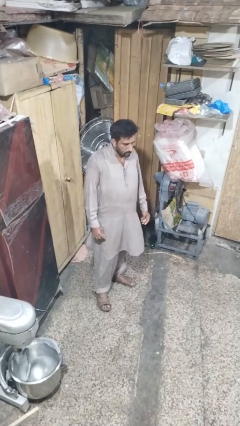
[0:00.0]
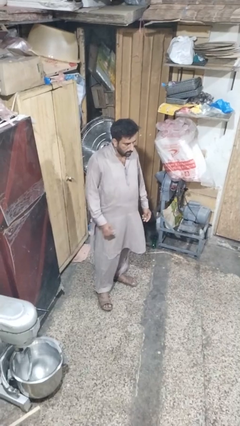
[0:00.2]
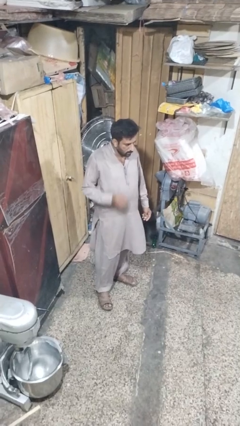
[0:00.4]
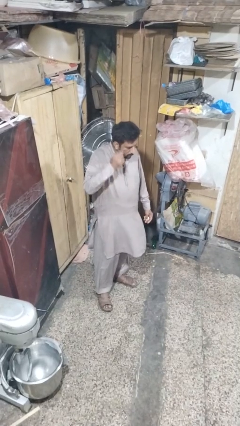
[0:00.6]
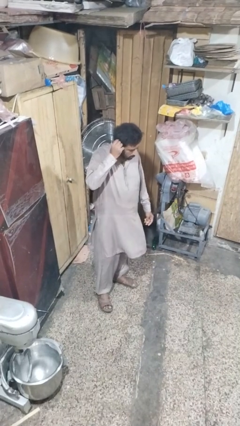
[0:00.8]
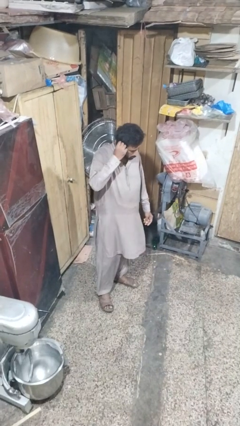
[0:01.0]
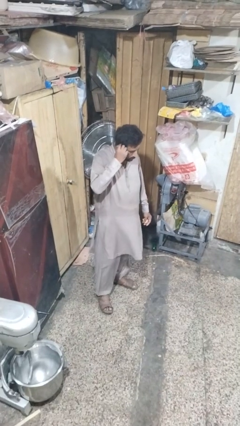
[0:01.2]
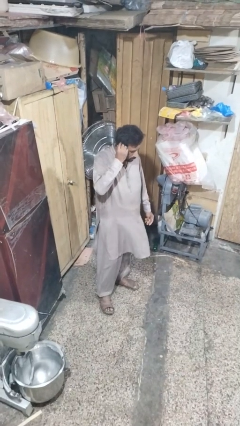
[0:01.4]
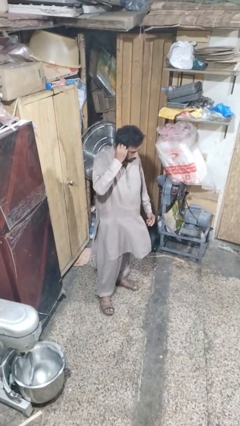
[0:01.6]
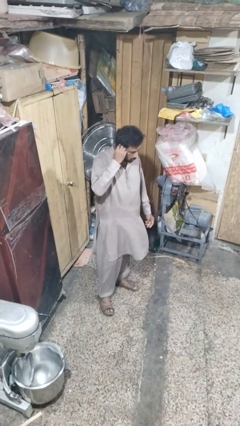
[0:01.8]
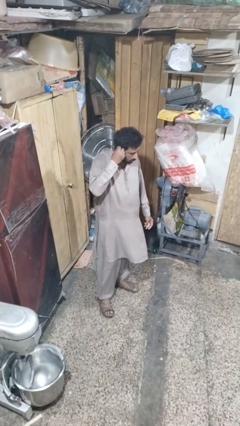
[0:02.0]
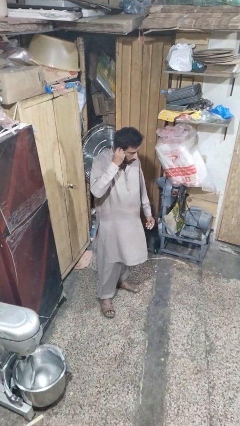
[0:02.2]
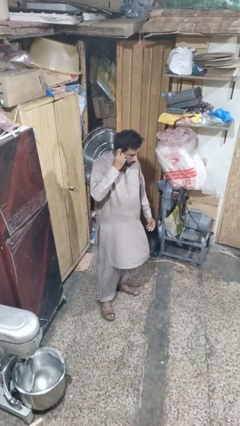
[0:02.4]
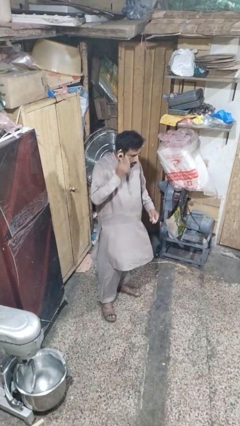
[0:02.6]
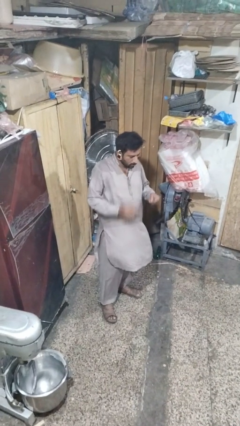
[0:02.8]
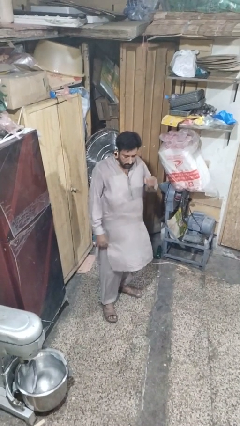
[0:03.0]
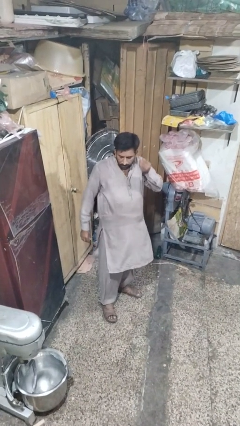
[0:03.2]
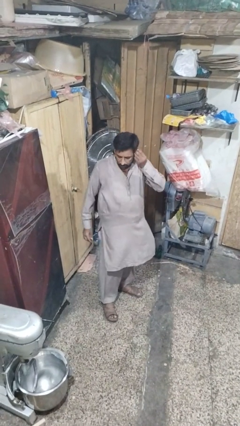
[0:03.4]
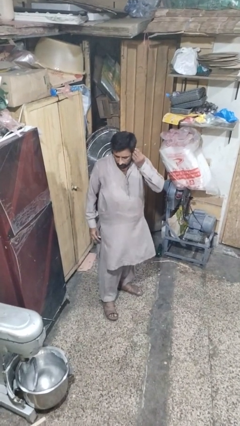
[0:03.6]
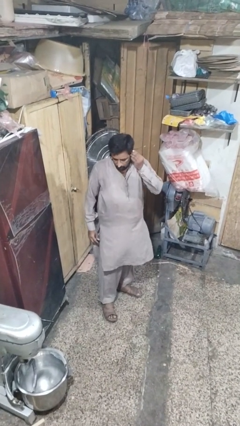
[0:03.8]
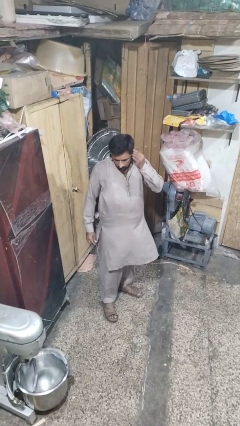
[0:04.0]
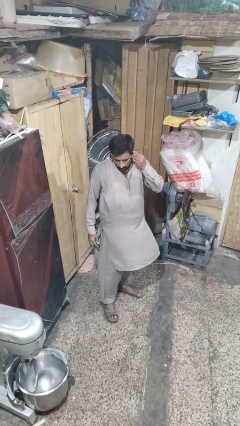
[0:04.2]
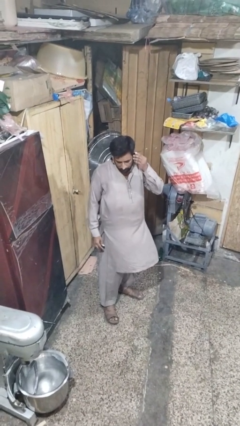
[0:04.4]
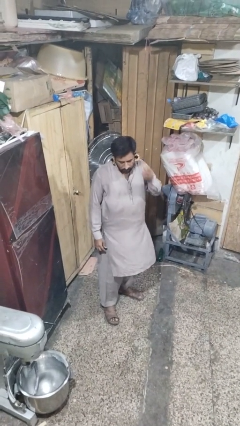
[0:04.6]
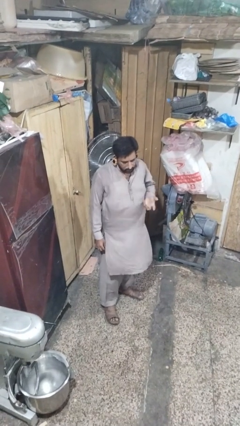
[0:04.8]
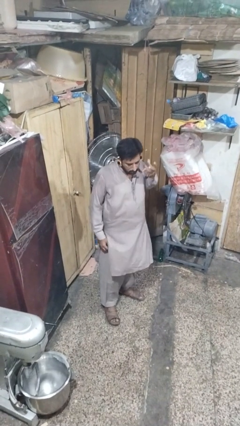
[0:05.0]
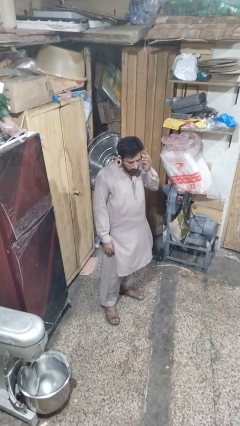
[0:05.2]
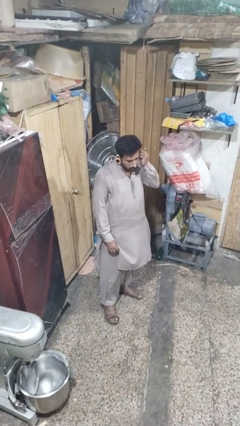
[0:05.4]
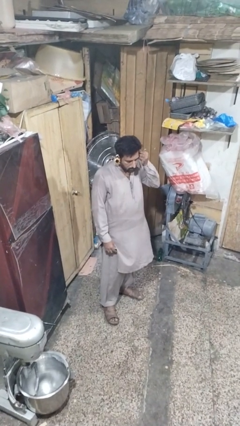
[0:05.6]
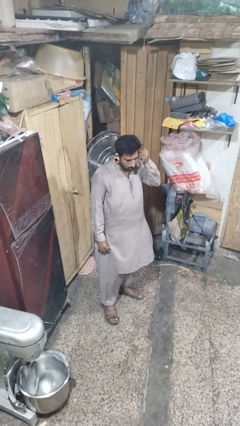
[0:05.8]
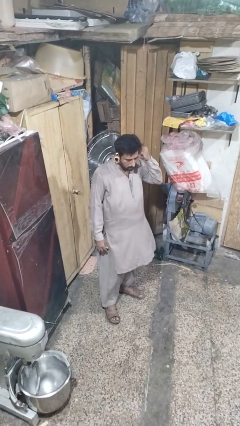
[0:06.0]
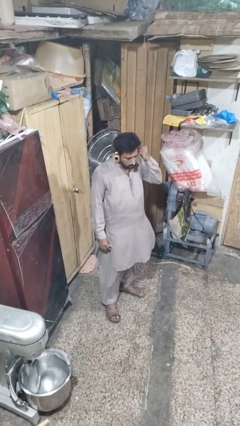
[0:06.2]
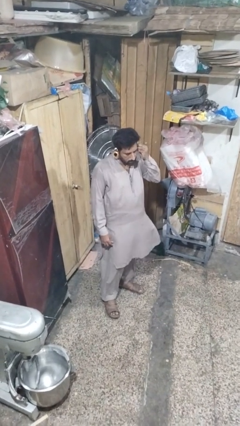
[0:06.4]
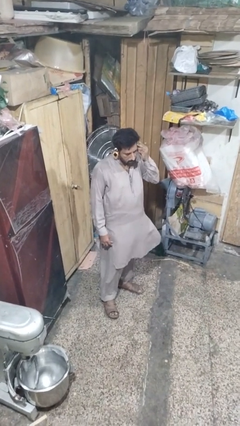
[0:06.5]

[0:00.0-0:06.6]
person puts on earrings

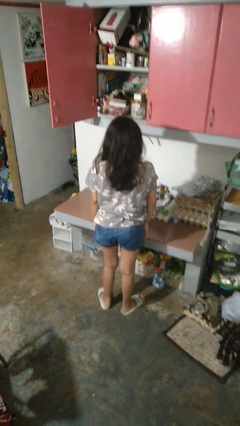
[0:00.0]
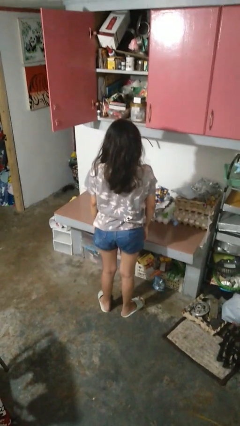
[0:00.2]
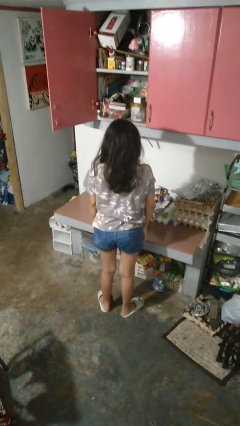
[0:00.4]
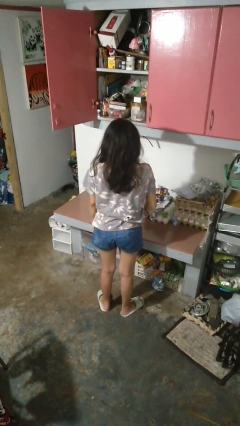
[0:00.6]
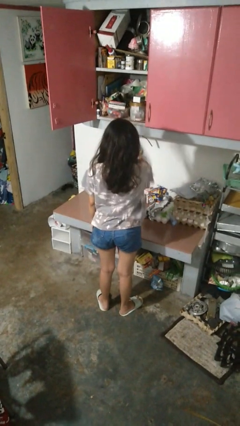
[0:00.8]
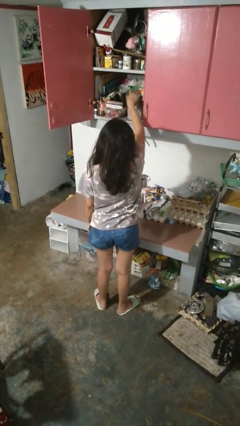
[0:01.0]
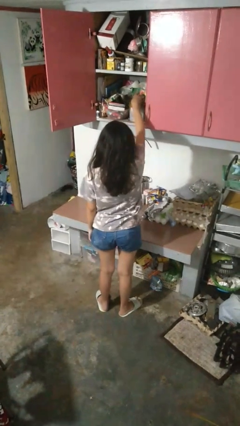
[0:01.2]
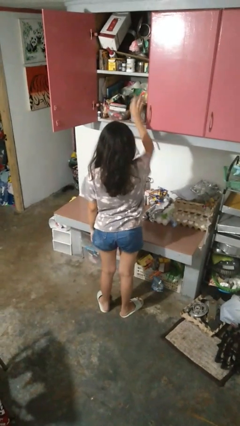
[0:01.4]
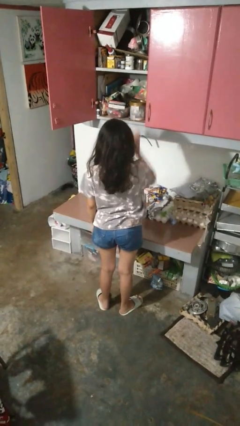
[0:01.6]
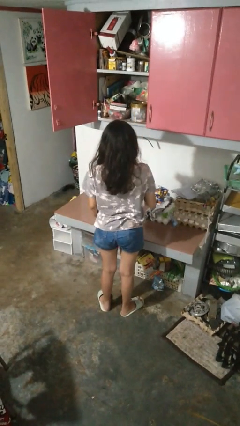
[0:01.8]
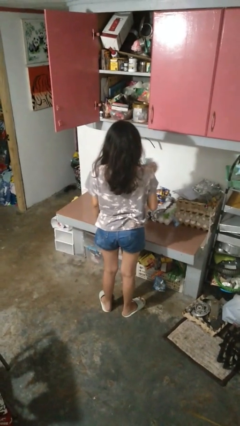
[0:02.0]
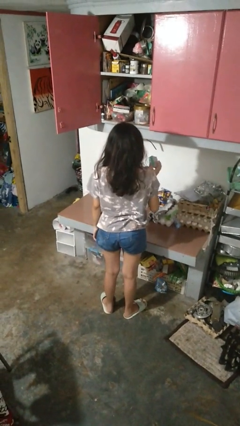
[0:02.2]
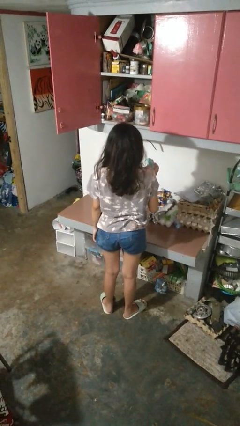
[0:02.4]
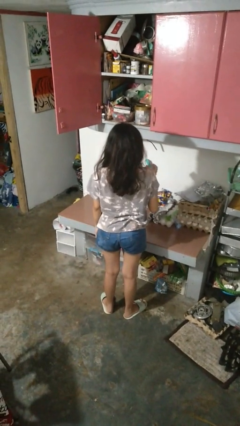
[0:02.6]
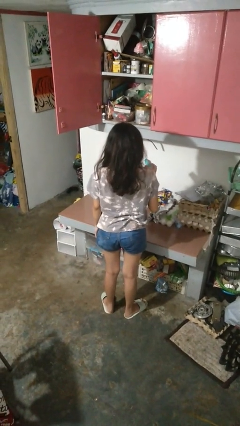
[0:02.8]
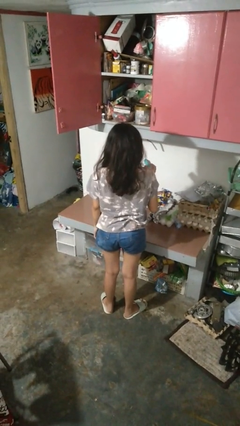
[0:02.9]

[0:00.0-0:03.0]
person takes object from cabinet

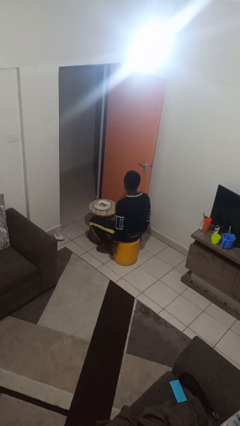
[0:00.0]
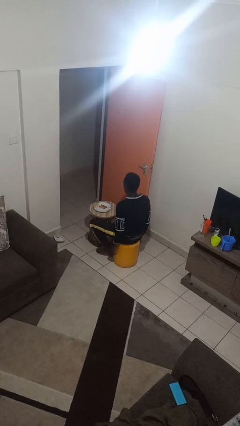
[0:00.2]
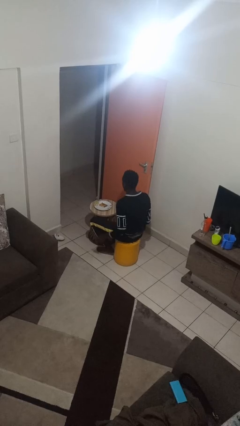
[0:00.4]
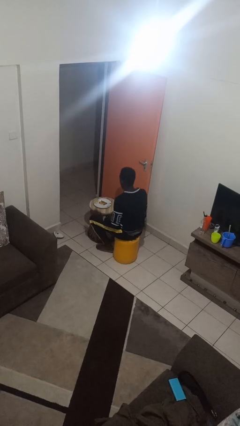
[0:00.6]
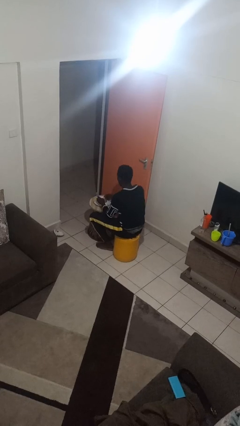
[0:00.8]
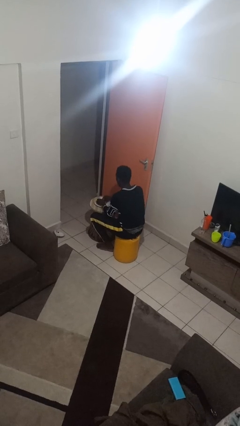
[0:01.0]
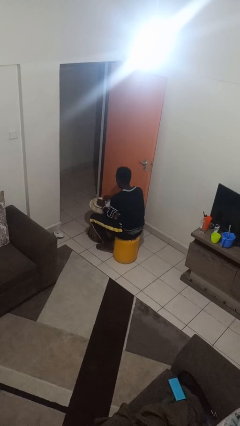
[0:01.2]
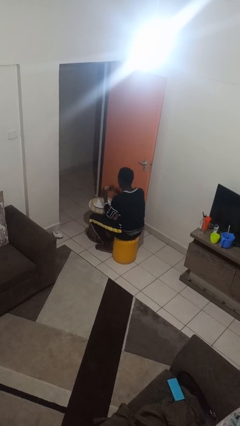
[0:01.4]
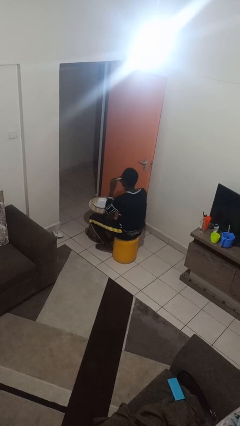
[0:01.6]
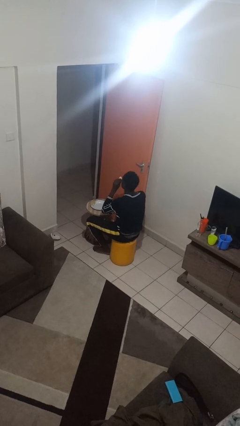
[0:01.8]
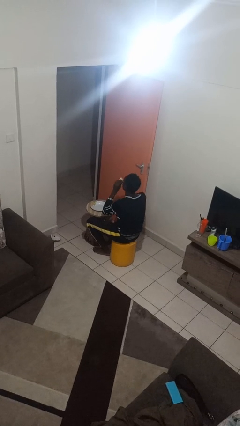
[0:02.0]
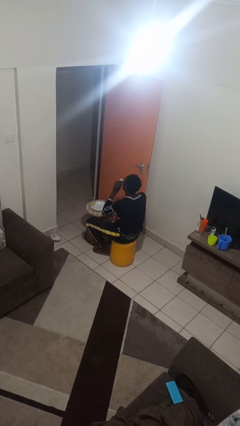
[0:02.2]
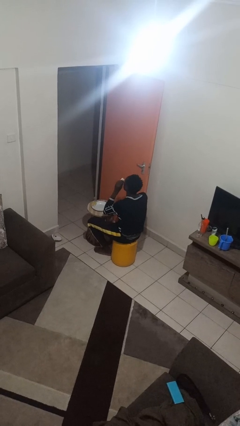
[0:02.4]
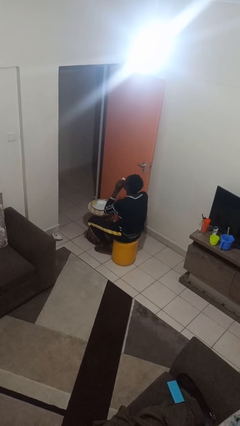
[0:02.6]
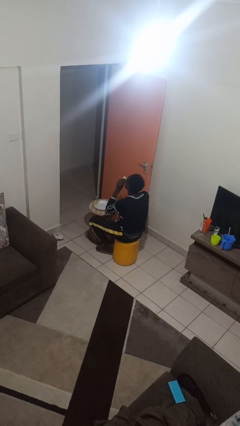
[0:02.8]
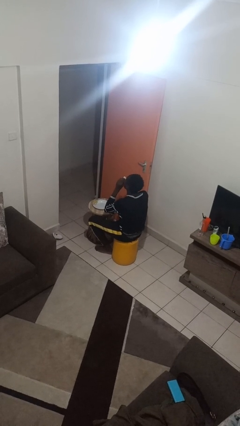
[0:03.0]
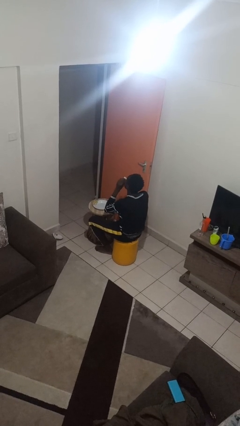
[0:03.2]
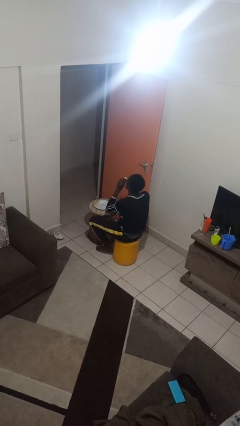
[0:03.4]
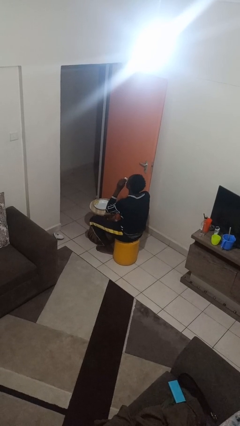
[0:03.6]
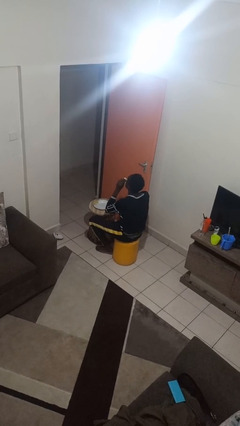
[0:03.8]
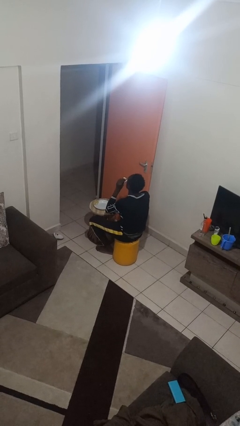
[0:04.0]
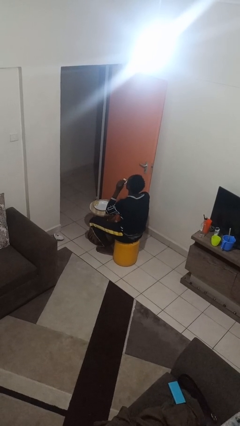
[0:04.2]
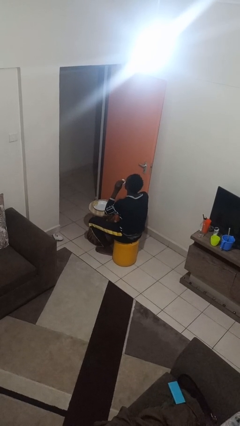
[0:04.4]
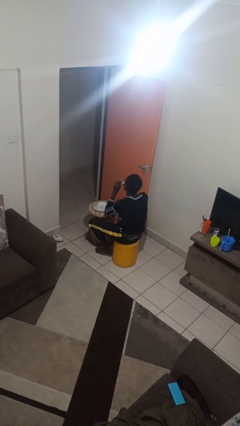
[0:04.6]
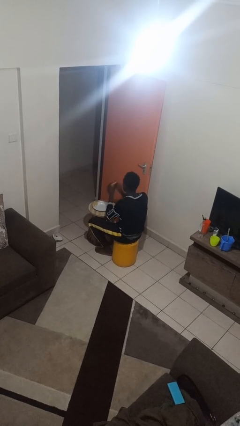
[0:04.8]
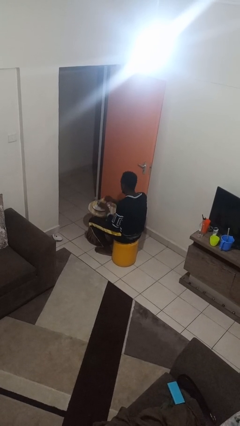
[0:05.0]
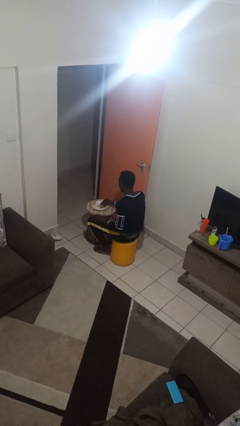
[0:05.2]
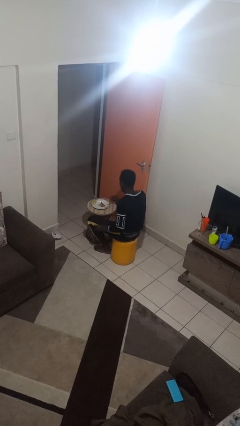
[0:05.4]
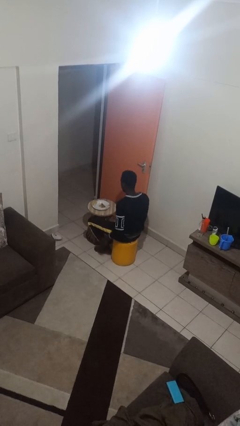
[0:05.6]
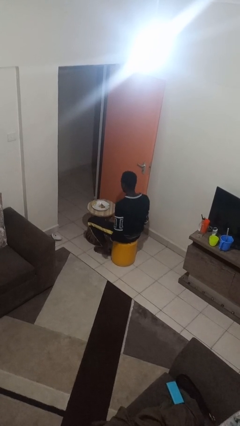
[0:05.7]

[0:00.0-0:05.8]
person eats with hands

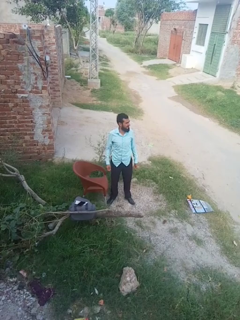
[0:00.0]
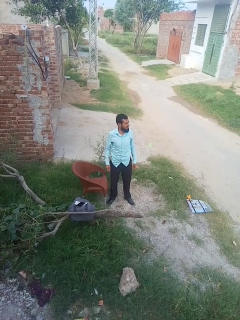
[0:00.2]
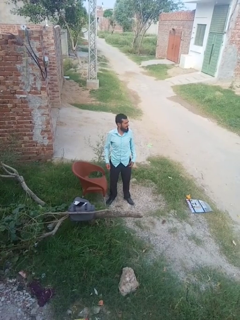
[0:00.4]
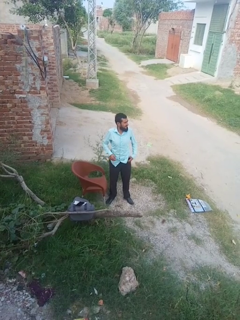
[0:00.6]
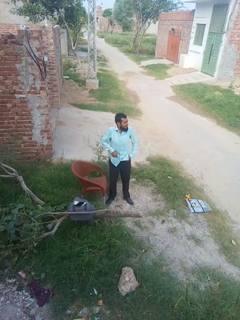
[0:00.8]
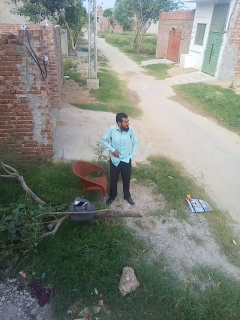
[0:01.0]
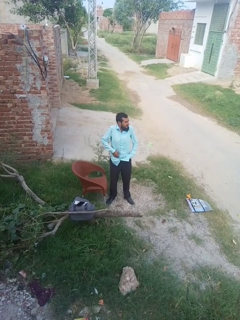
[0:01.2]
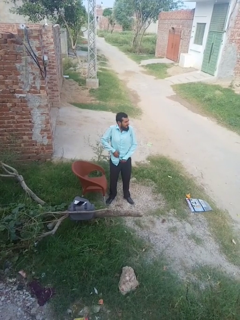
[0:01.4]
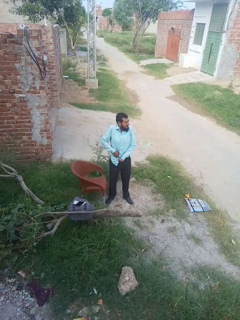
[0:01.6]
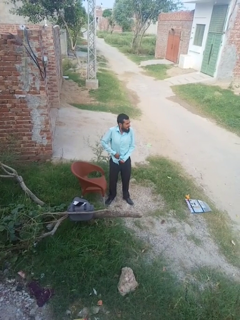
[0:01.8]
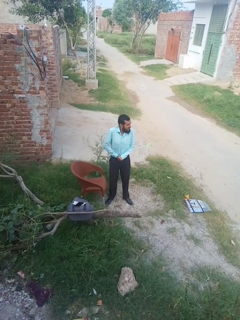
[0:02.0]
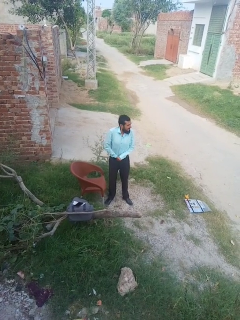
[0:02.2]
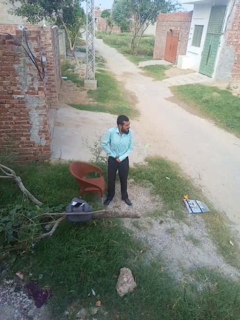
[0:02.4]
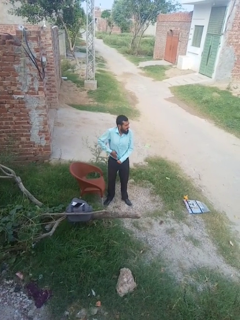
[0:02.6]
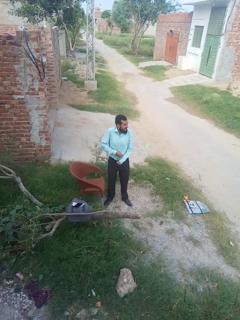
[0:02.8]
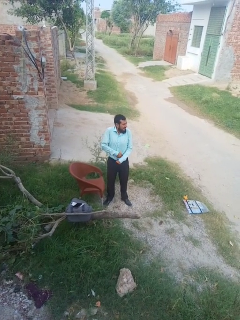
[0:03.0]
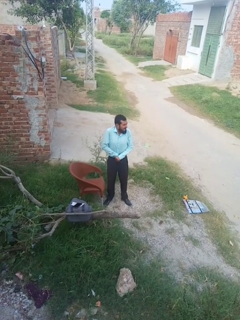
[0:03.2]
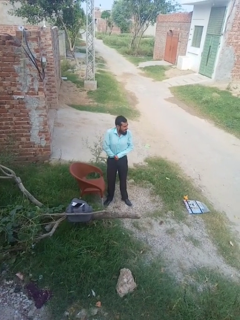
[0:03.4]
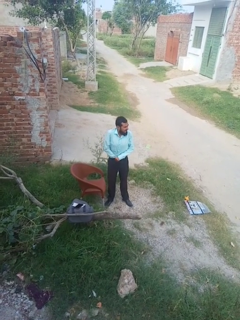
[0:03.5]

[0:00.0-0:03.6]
person tucks in shirt
